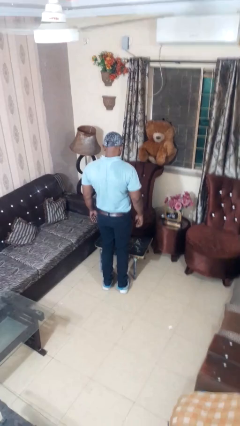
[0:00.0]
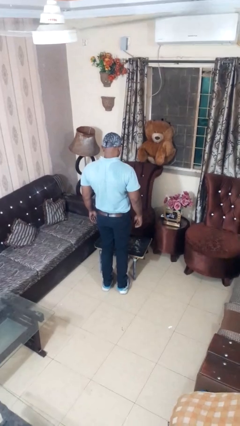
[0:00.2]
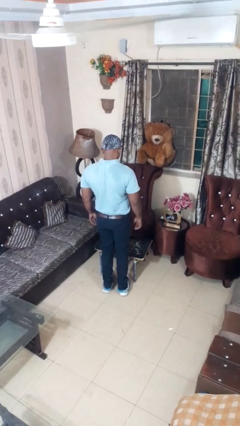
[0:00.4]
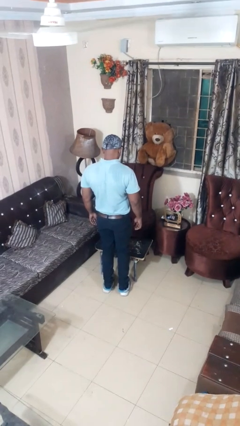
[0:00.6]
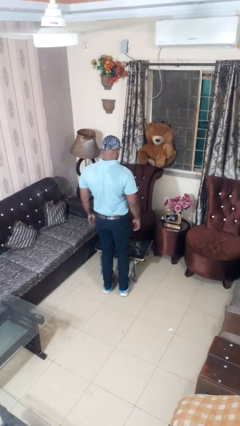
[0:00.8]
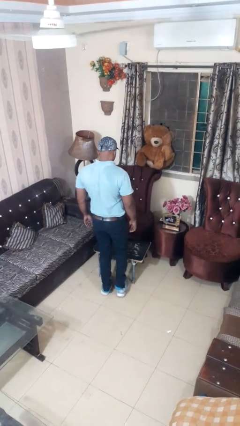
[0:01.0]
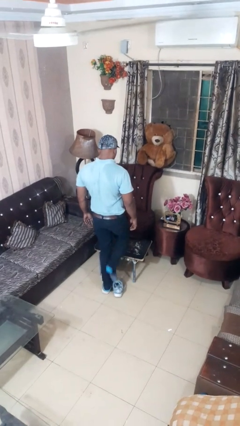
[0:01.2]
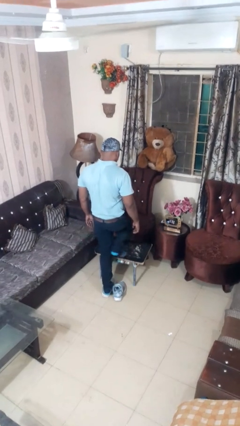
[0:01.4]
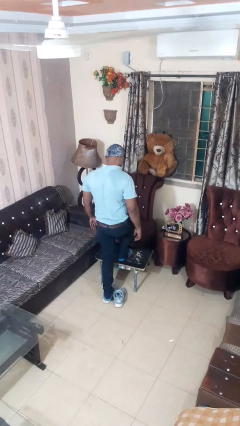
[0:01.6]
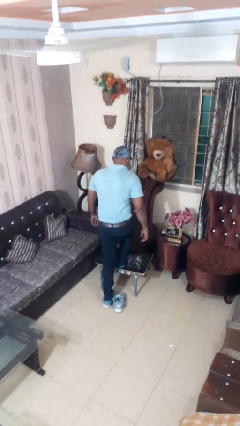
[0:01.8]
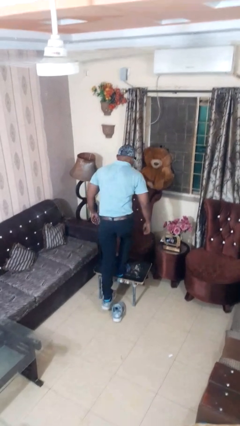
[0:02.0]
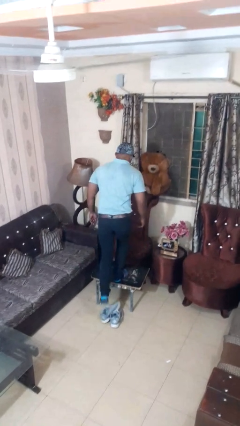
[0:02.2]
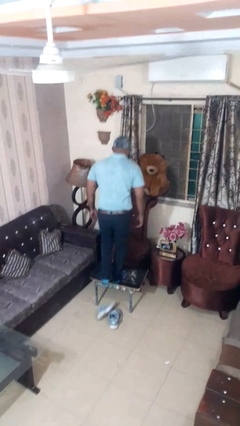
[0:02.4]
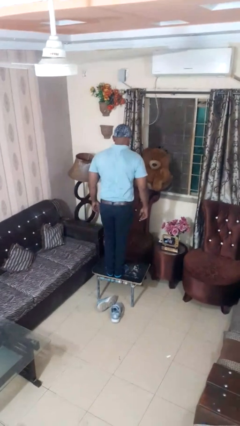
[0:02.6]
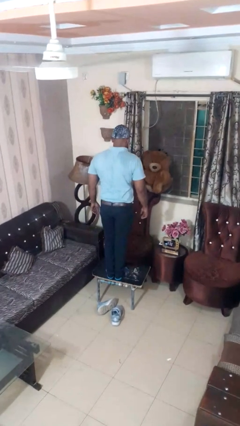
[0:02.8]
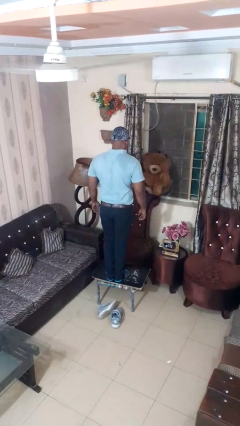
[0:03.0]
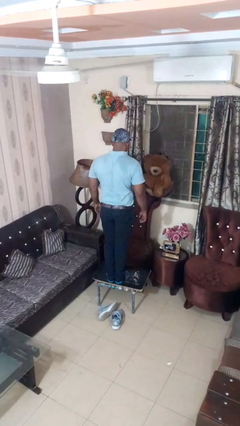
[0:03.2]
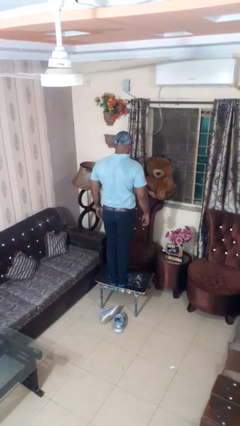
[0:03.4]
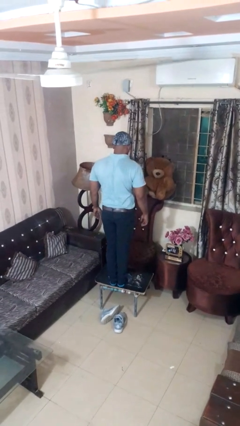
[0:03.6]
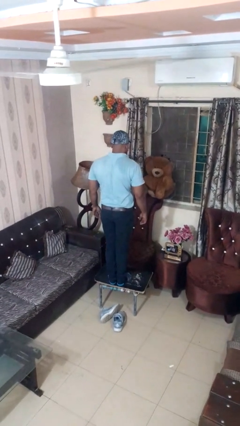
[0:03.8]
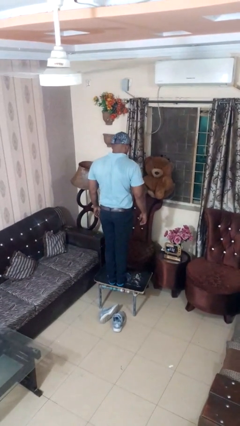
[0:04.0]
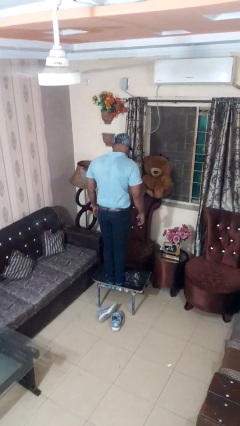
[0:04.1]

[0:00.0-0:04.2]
person climbs on table

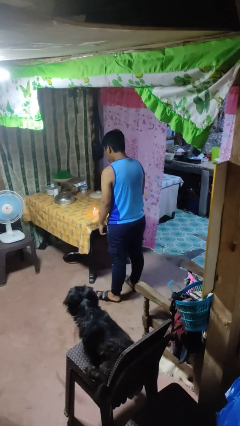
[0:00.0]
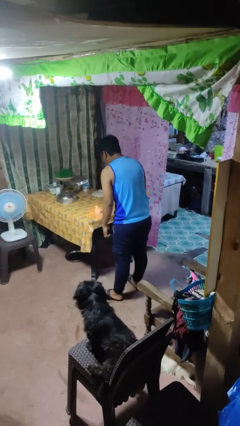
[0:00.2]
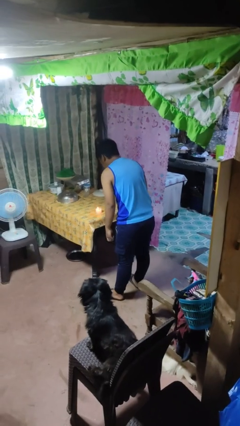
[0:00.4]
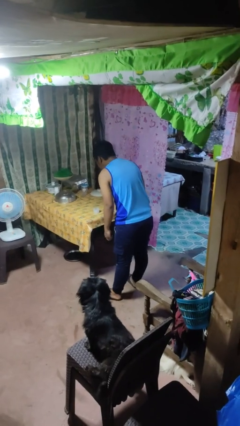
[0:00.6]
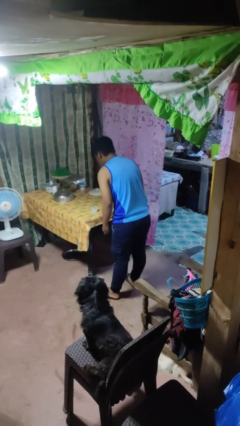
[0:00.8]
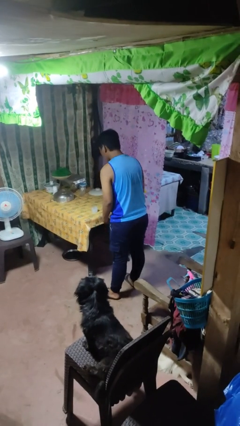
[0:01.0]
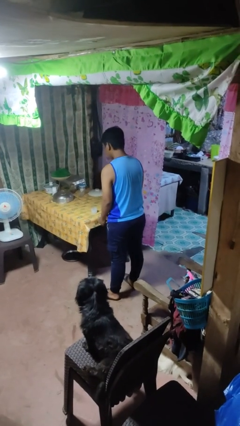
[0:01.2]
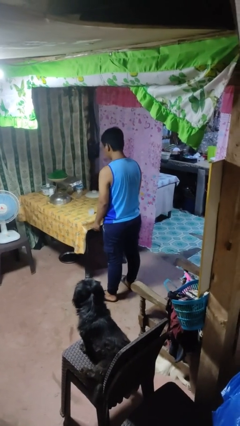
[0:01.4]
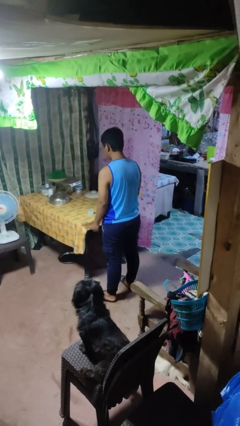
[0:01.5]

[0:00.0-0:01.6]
person extinguishes candle

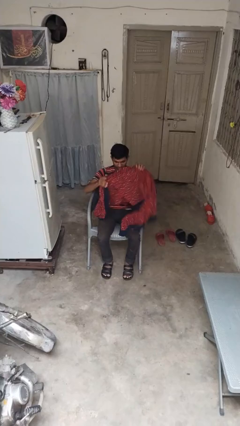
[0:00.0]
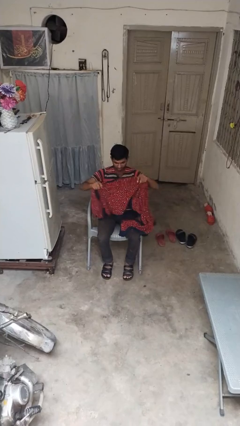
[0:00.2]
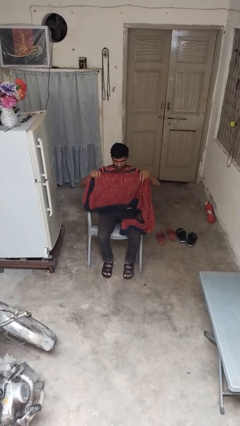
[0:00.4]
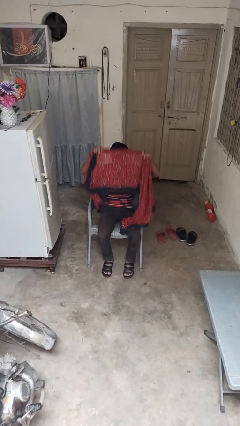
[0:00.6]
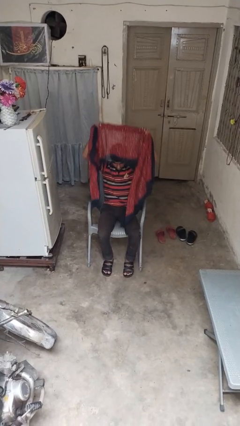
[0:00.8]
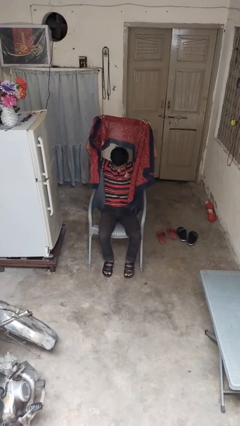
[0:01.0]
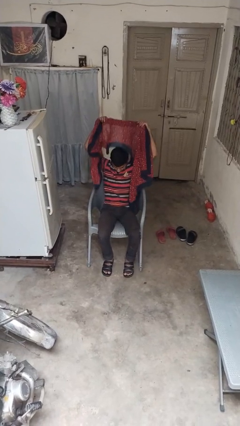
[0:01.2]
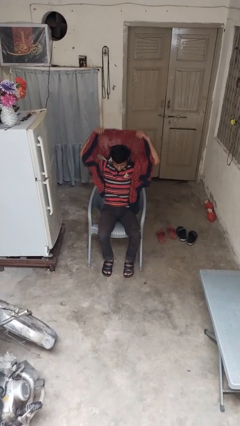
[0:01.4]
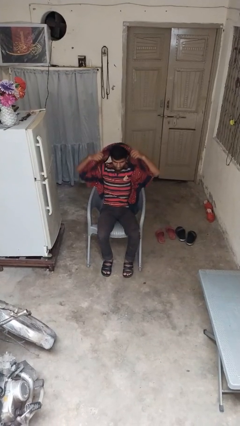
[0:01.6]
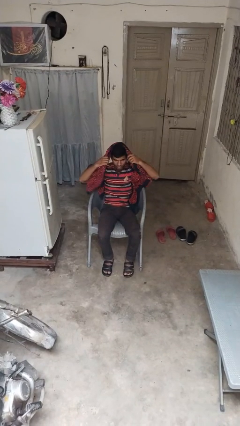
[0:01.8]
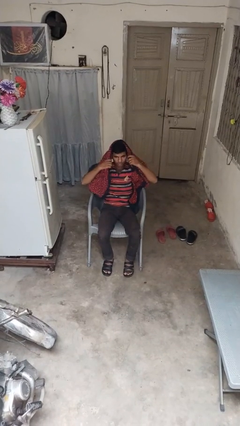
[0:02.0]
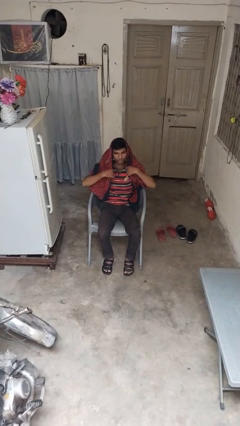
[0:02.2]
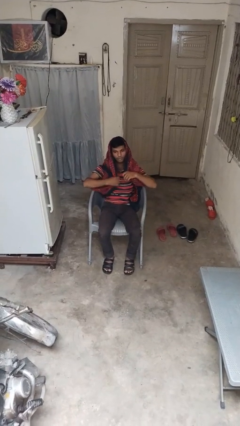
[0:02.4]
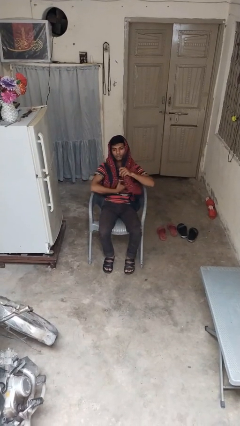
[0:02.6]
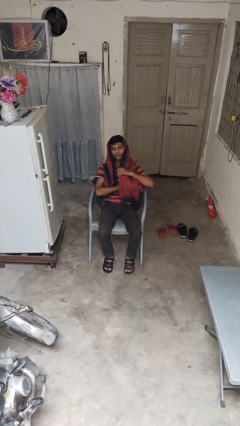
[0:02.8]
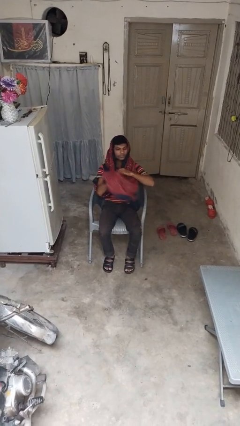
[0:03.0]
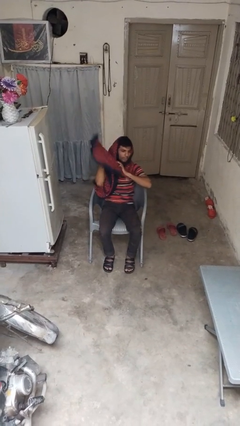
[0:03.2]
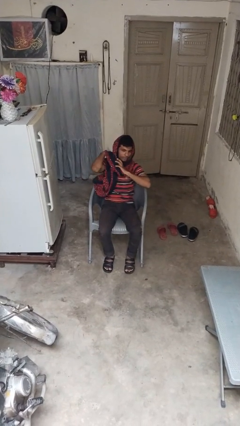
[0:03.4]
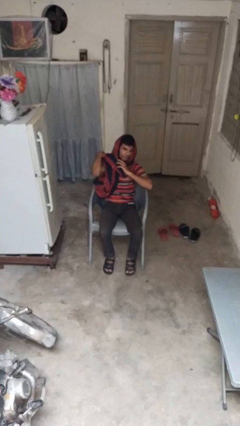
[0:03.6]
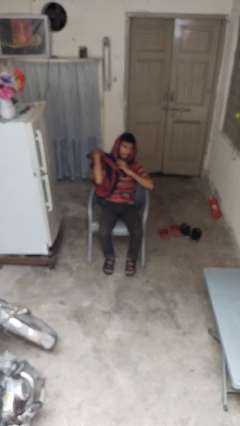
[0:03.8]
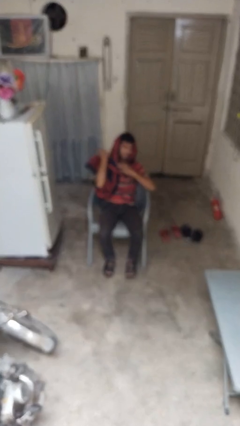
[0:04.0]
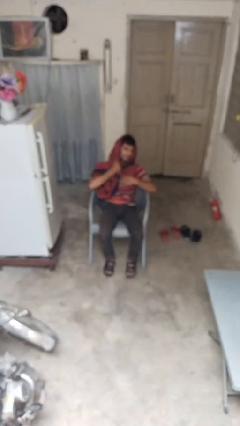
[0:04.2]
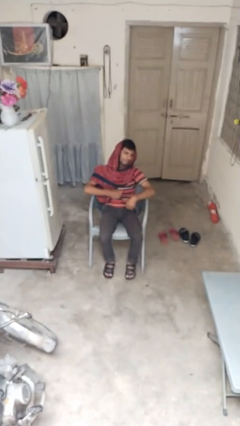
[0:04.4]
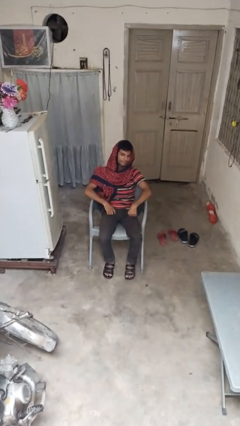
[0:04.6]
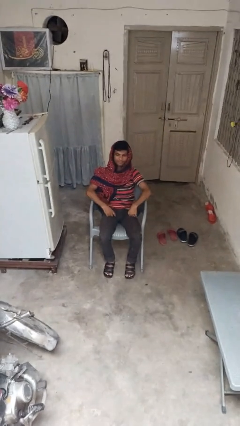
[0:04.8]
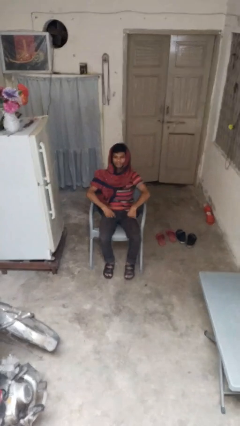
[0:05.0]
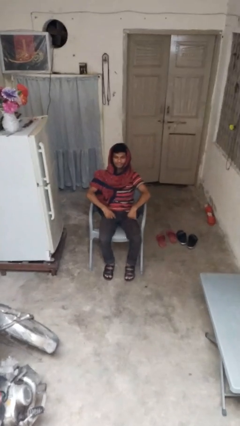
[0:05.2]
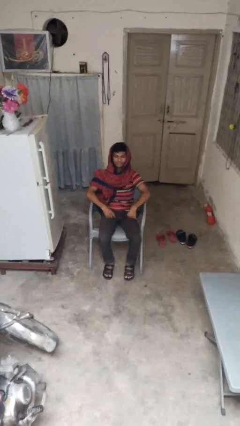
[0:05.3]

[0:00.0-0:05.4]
person puts on scarf

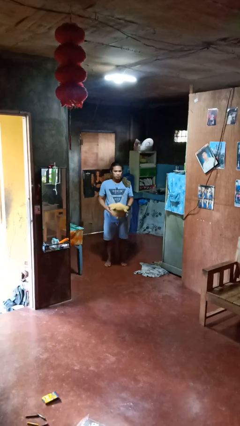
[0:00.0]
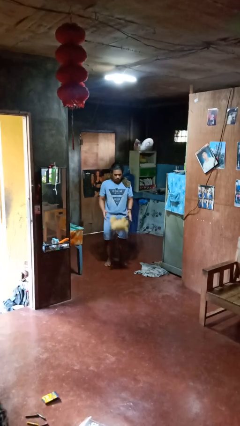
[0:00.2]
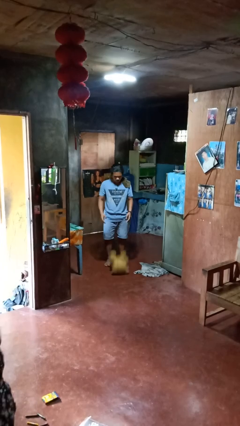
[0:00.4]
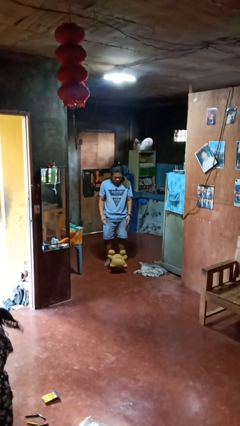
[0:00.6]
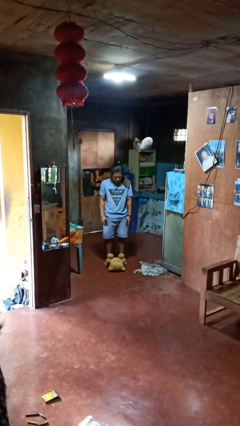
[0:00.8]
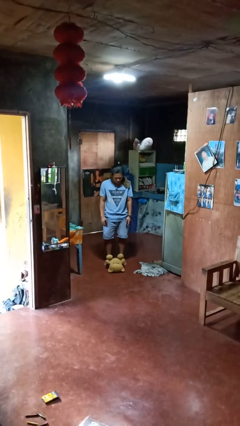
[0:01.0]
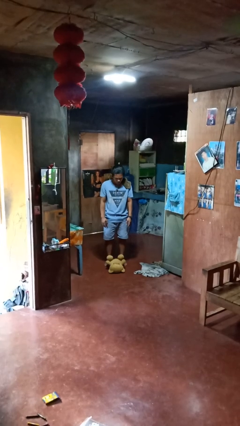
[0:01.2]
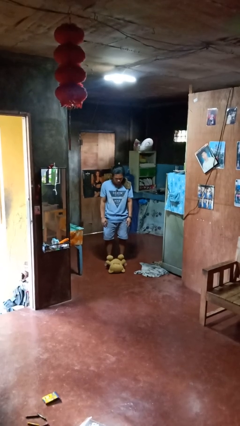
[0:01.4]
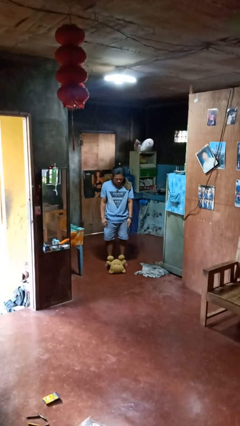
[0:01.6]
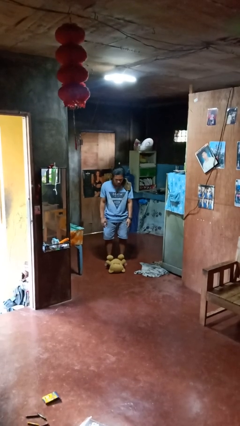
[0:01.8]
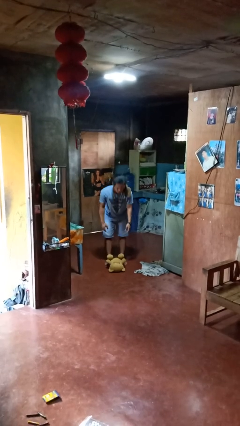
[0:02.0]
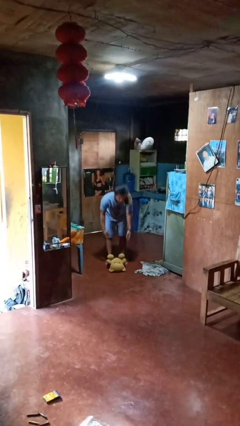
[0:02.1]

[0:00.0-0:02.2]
person drops object

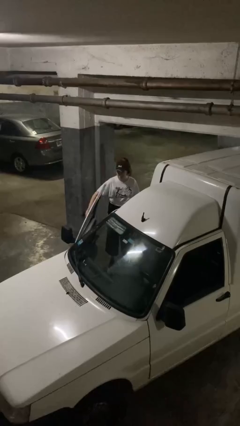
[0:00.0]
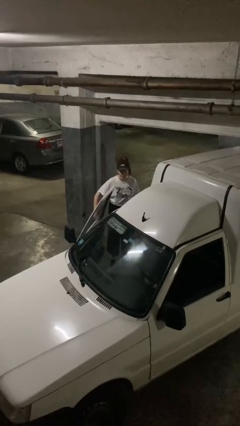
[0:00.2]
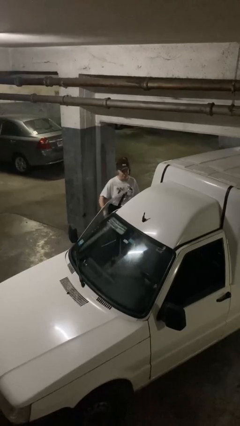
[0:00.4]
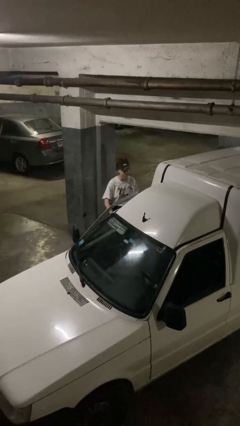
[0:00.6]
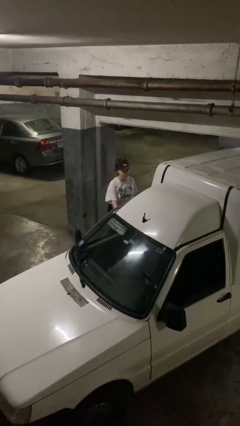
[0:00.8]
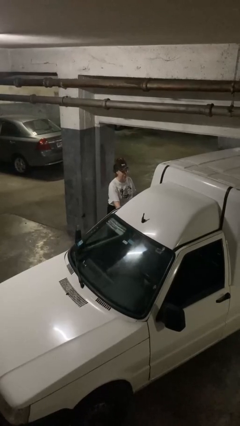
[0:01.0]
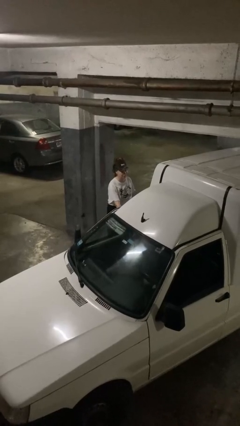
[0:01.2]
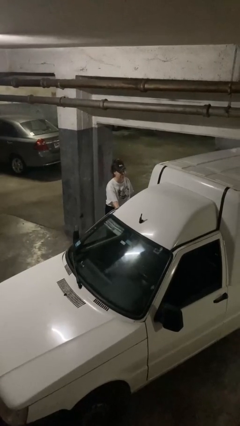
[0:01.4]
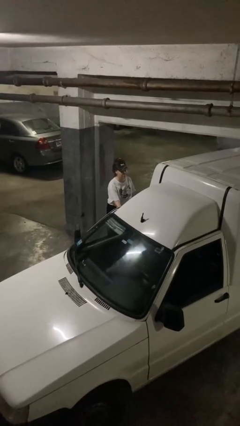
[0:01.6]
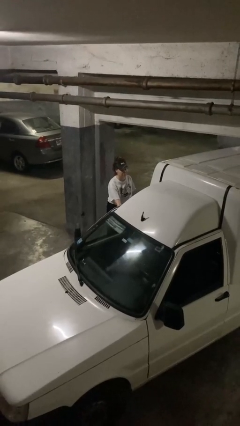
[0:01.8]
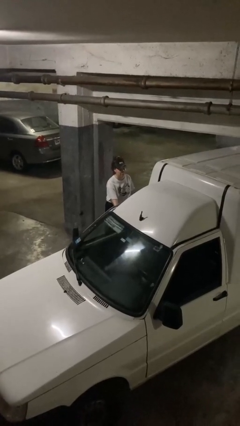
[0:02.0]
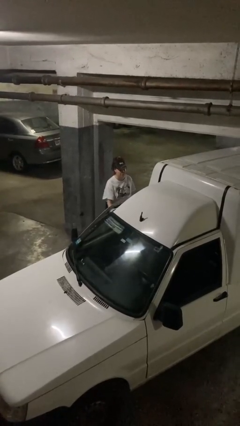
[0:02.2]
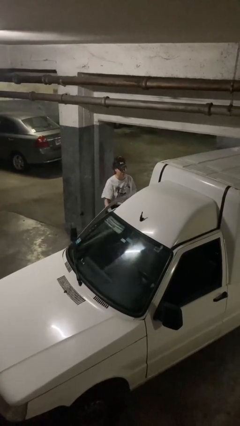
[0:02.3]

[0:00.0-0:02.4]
person closes car door

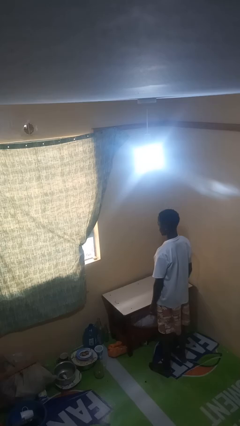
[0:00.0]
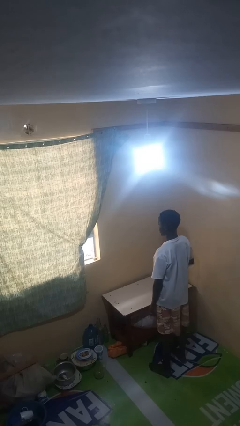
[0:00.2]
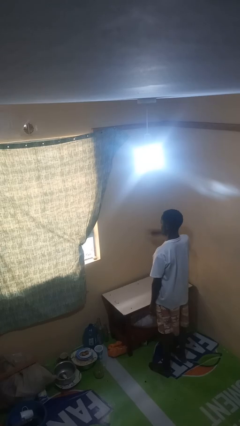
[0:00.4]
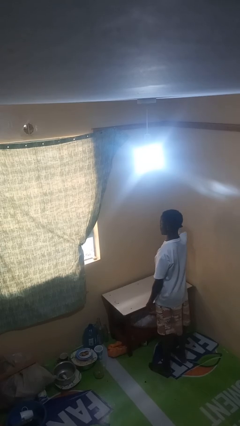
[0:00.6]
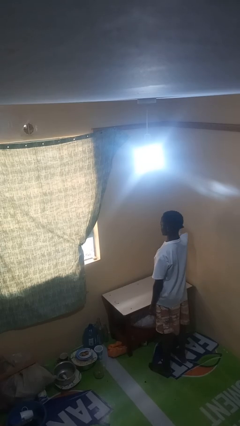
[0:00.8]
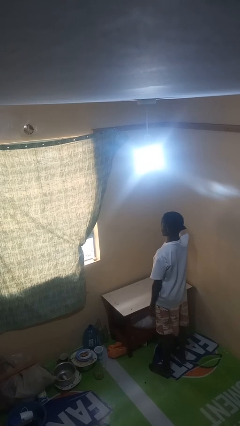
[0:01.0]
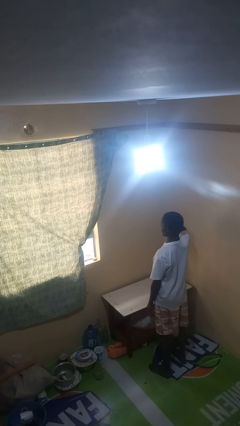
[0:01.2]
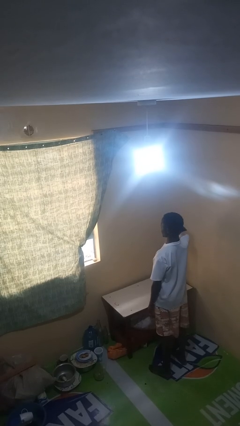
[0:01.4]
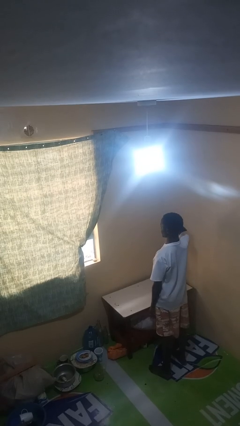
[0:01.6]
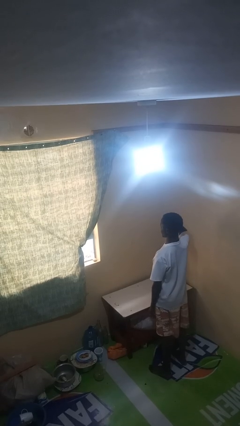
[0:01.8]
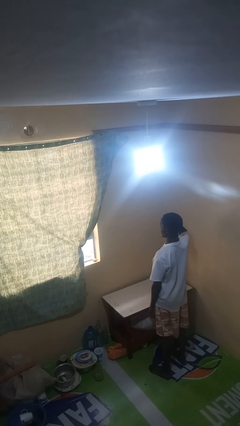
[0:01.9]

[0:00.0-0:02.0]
person salutes
